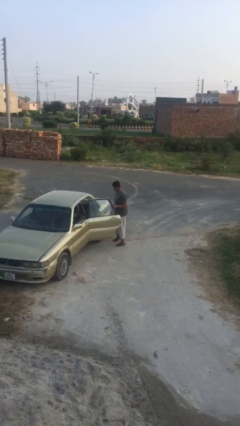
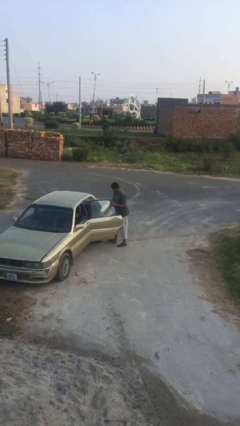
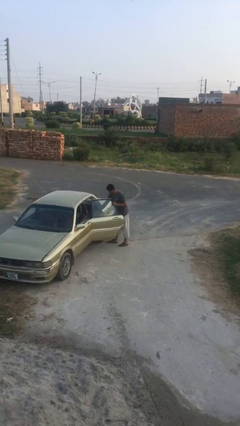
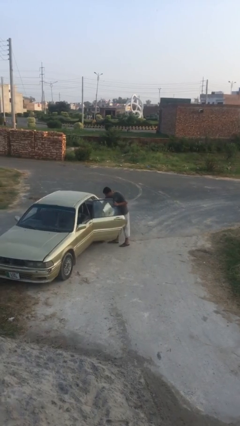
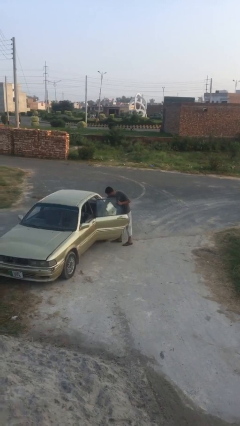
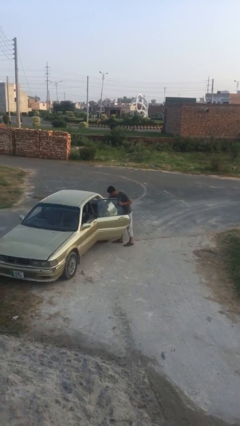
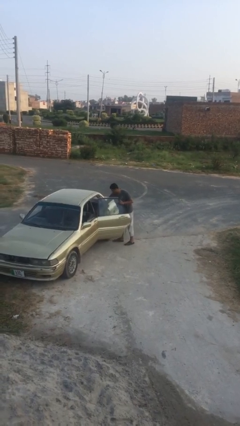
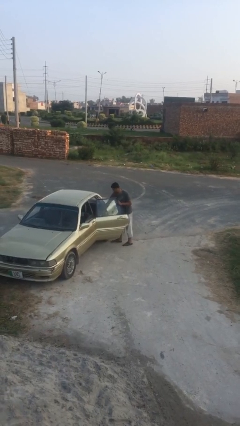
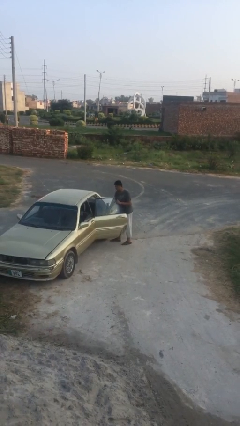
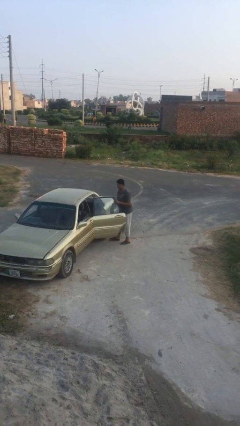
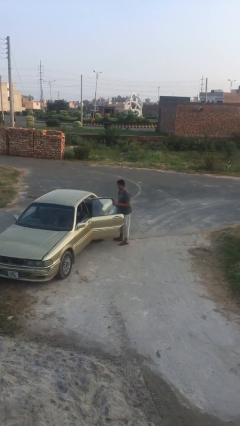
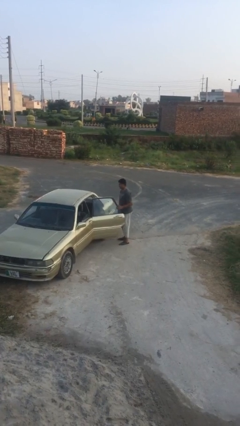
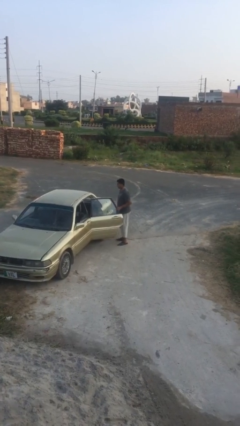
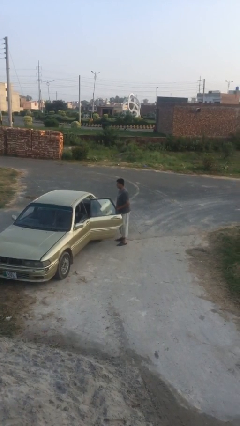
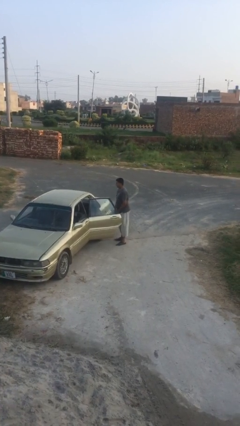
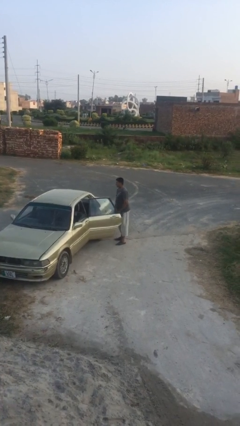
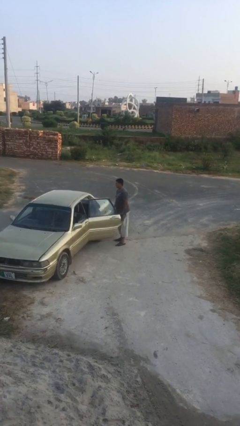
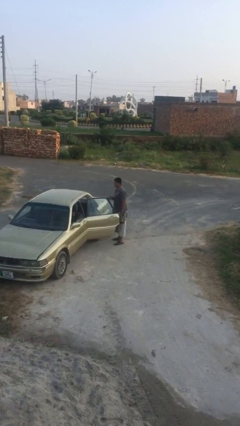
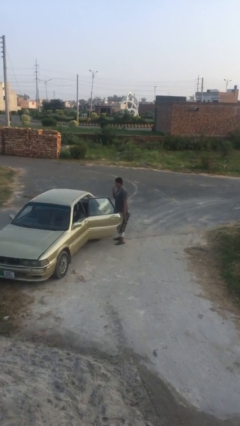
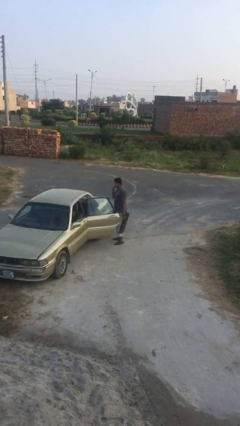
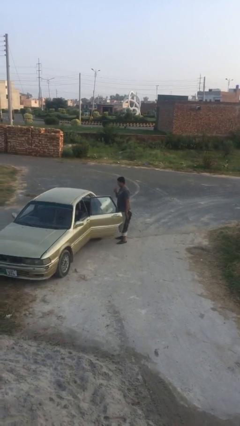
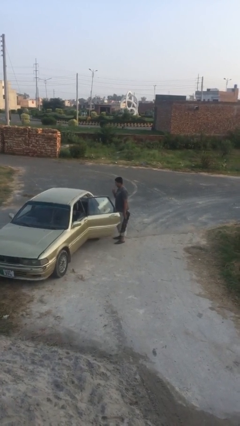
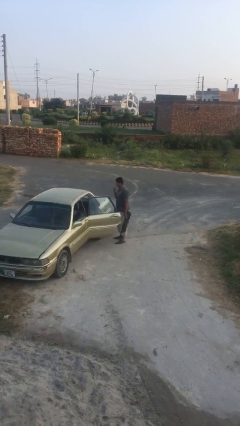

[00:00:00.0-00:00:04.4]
person unloads car

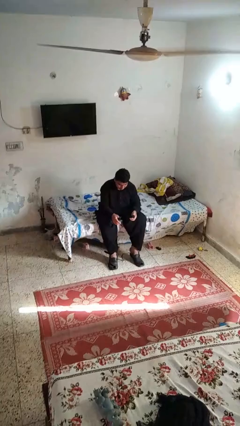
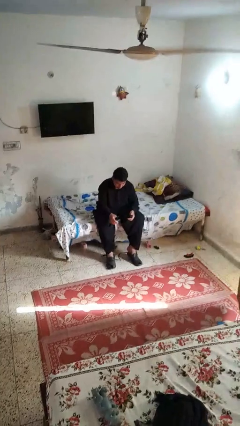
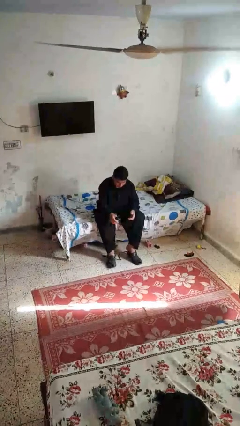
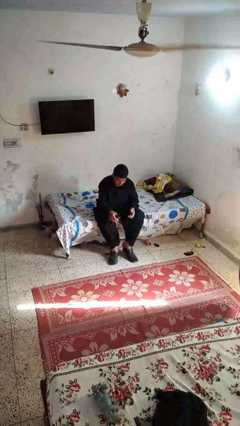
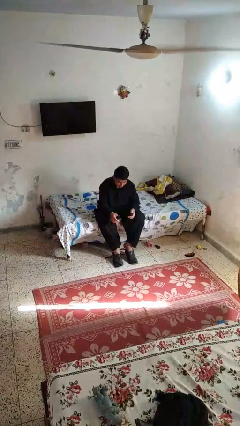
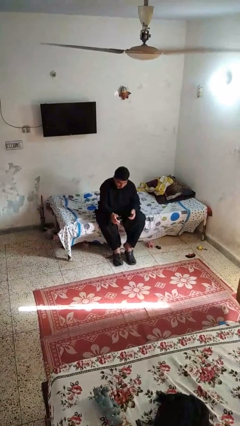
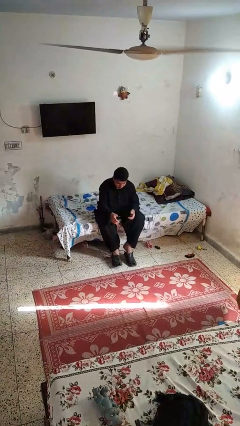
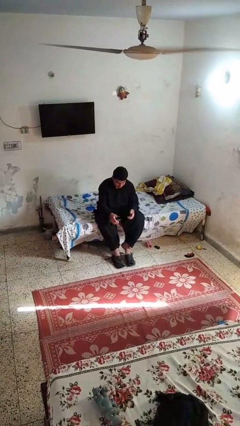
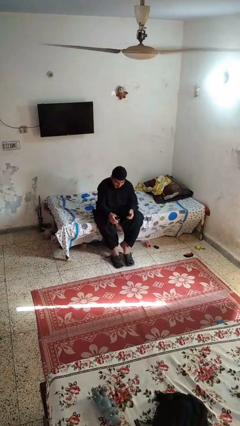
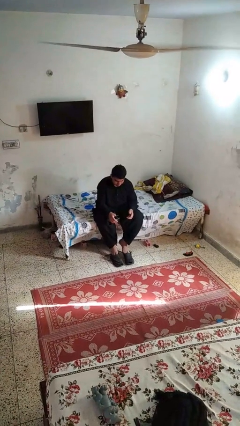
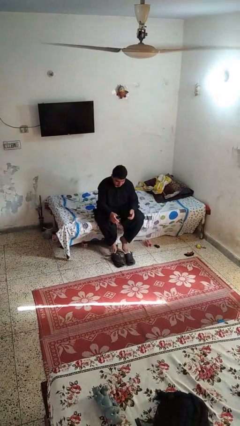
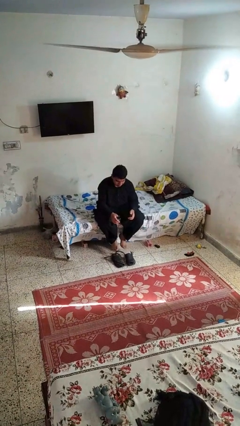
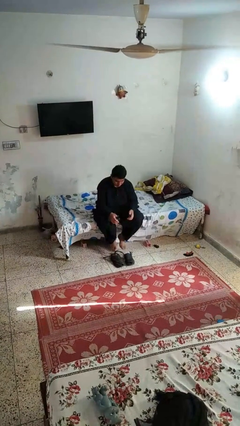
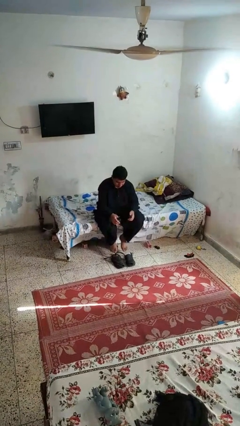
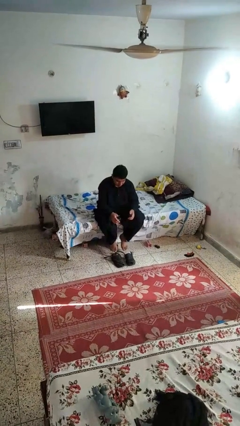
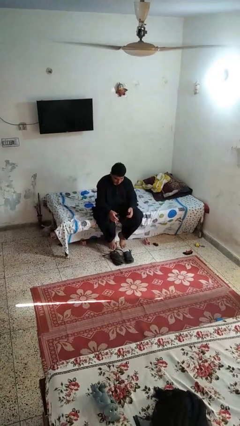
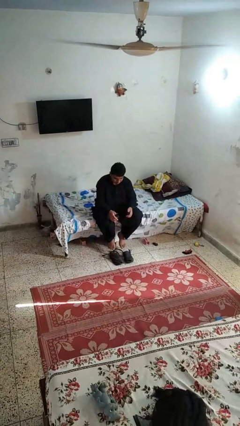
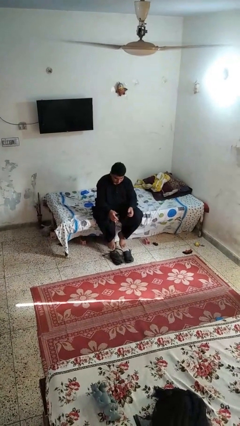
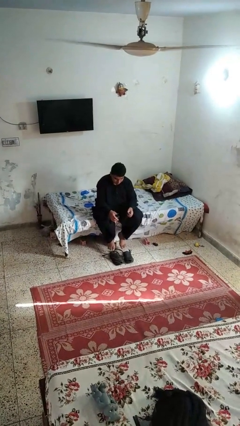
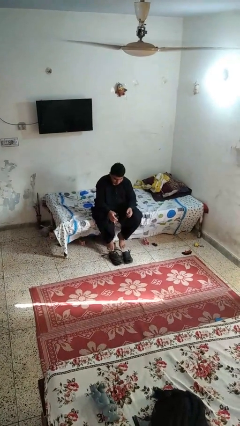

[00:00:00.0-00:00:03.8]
person takes off shoes

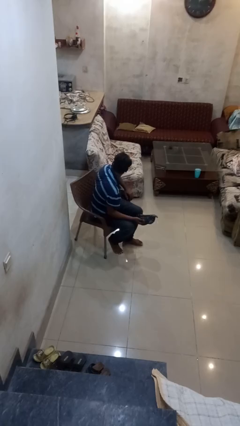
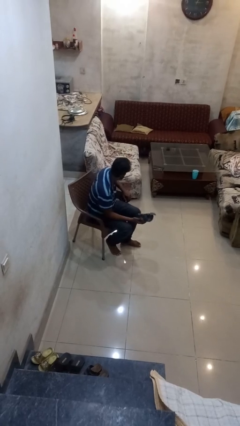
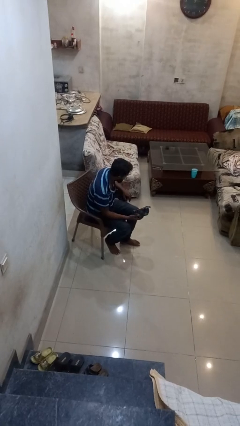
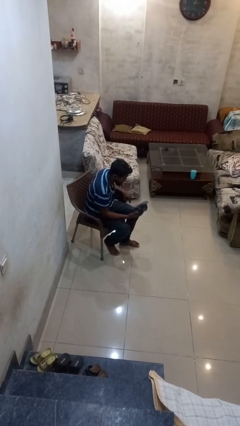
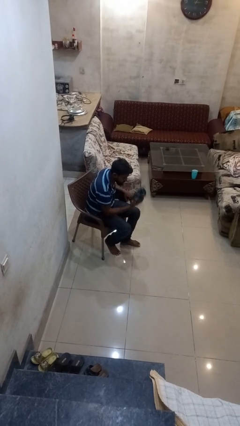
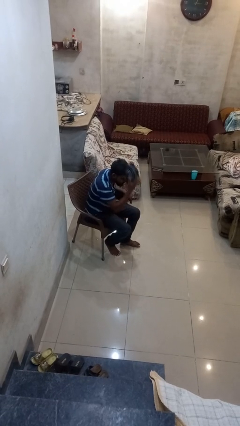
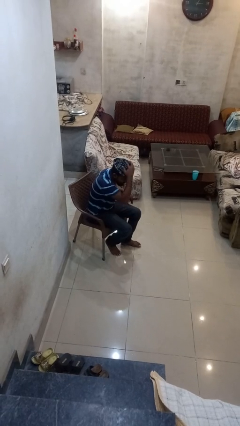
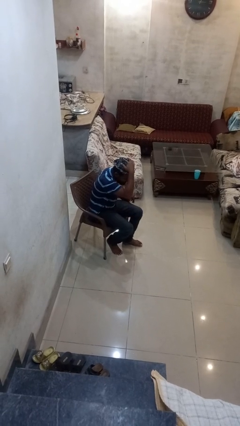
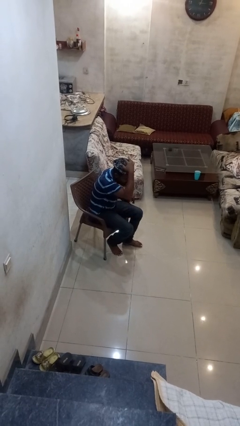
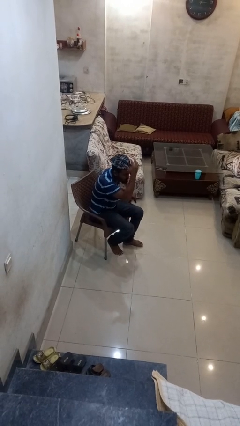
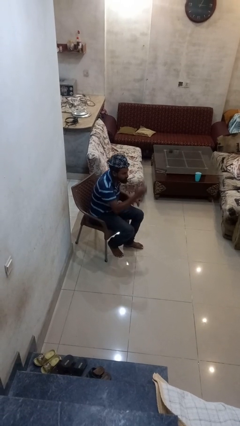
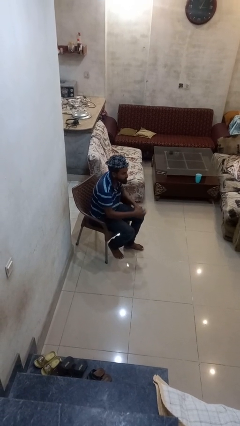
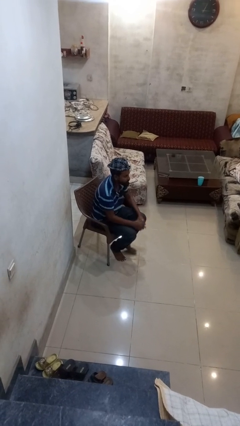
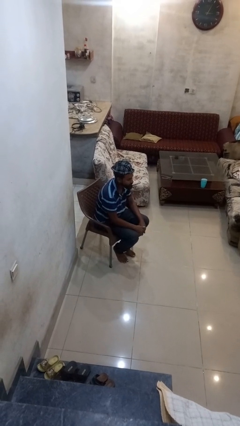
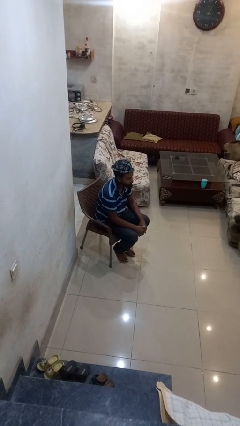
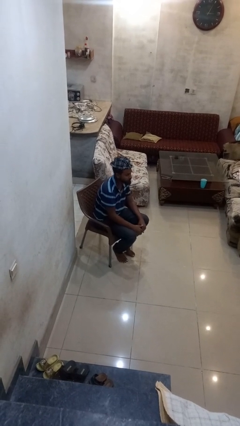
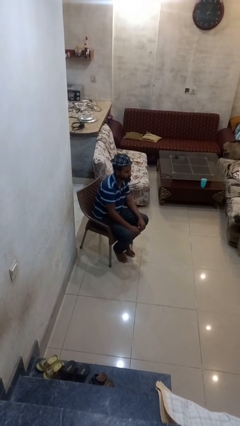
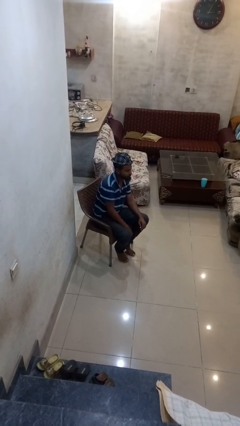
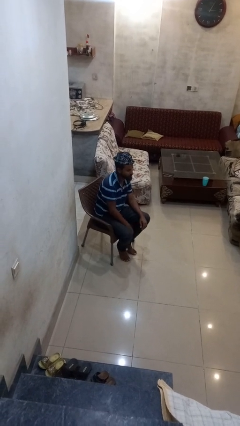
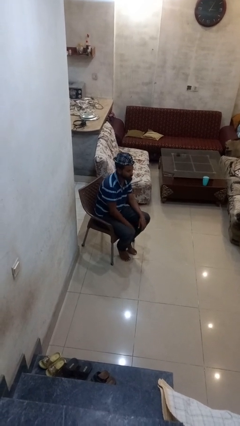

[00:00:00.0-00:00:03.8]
person puts on hat

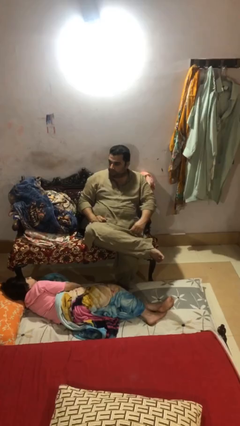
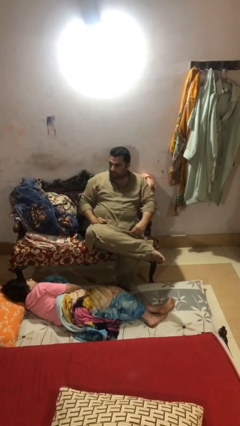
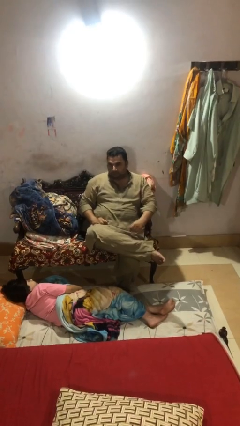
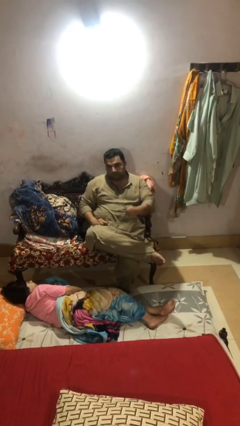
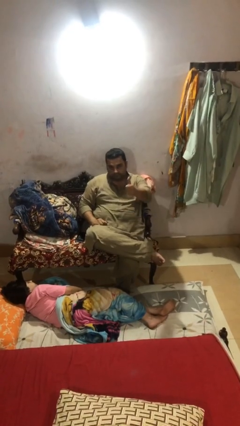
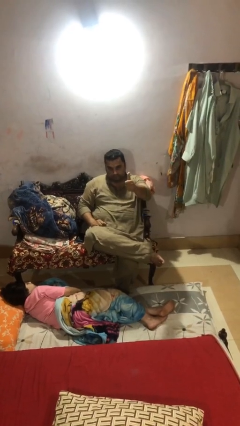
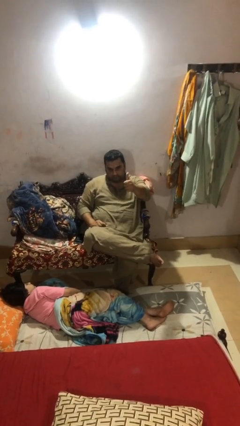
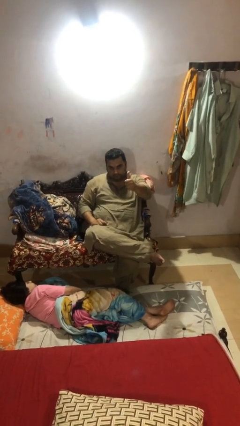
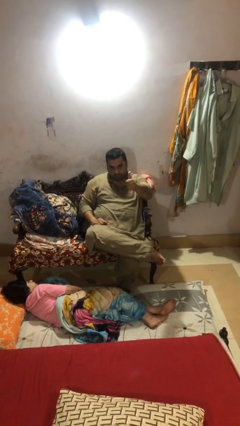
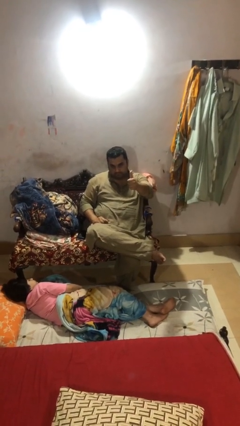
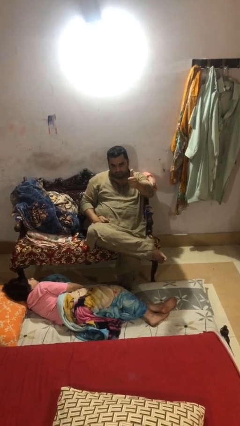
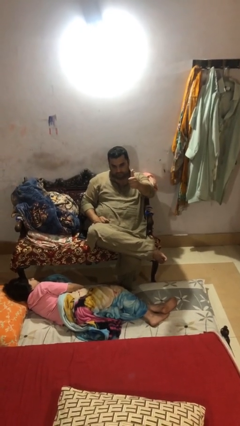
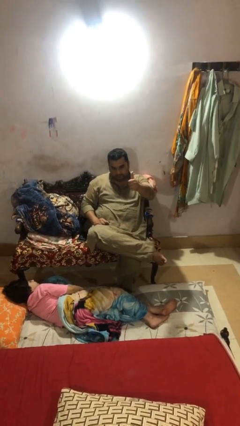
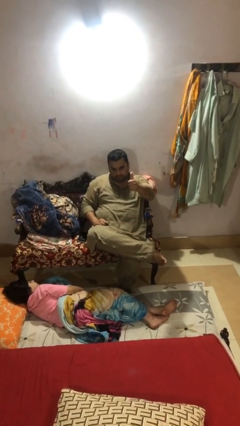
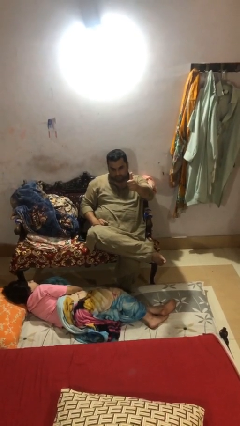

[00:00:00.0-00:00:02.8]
person gestures thumbs up

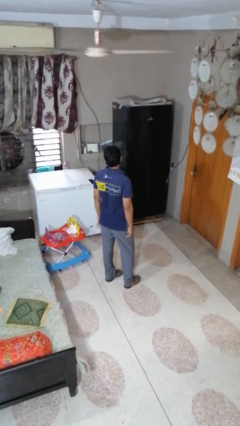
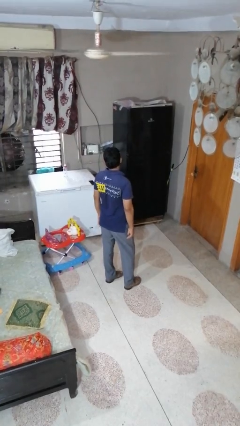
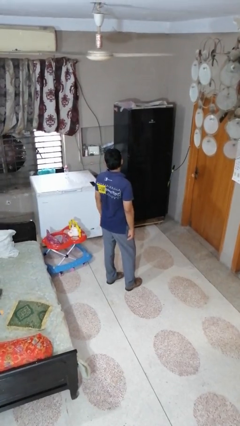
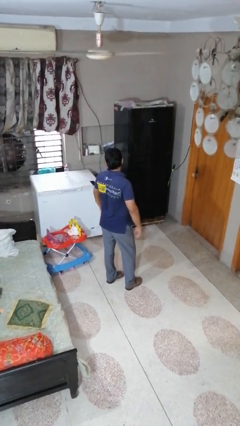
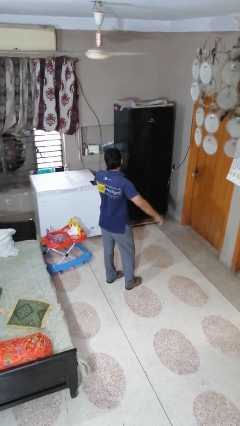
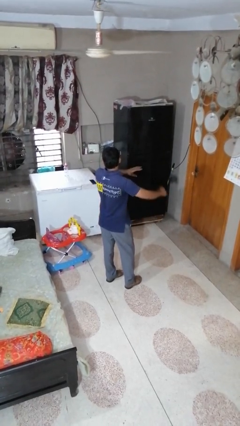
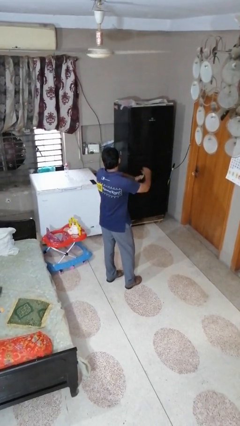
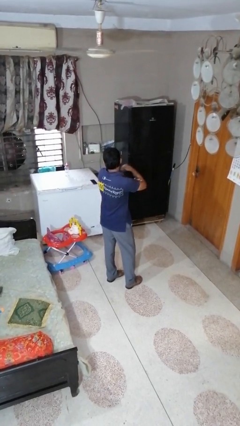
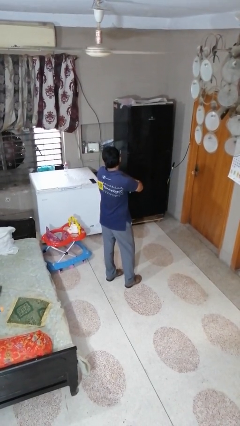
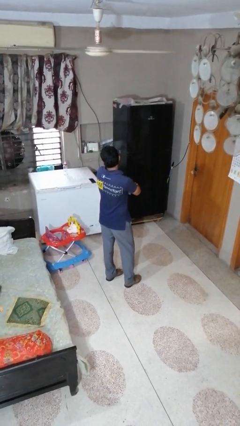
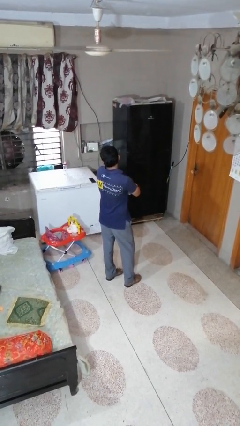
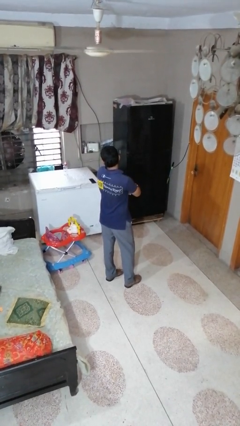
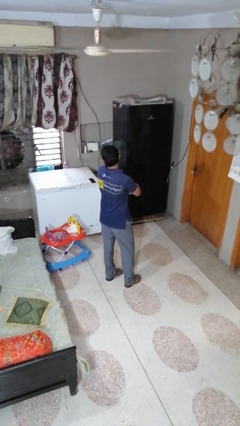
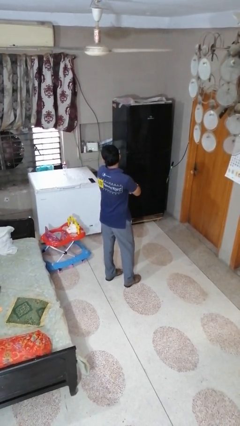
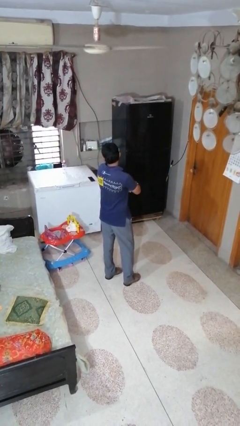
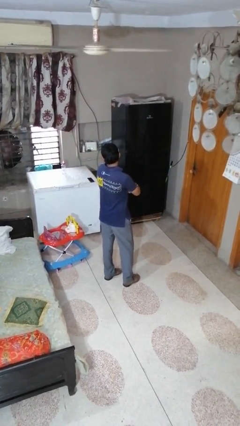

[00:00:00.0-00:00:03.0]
person crosses arms
